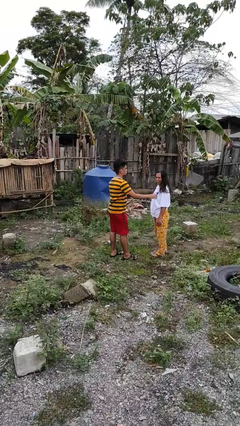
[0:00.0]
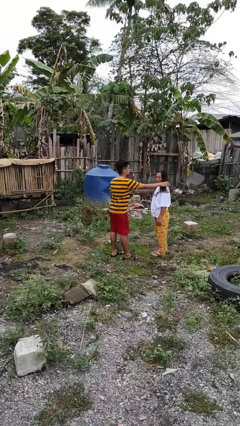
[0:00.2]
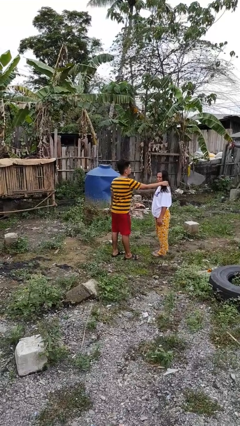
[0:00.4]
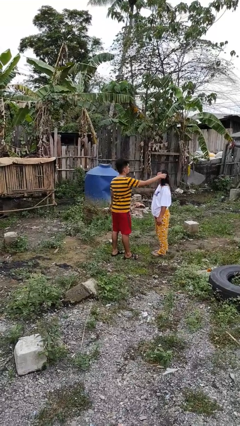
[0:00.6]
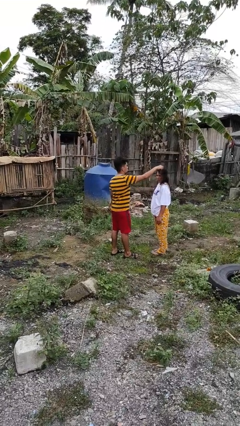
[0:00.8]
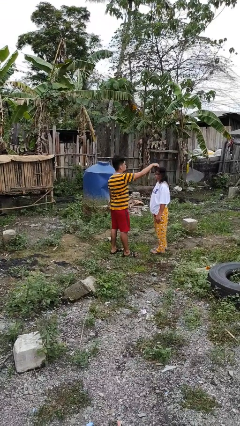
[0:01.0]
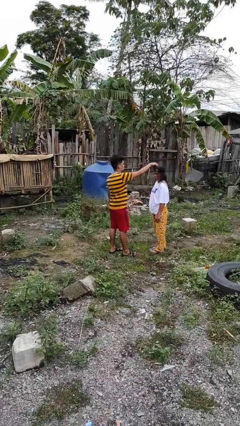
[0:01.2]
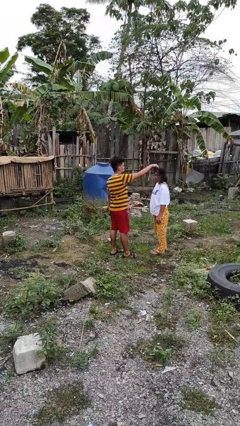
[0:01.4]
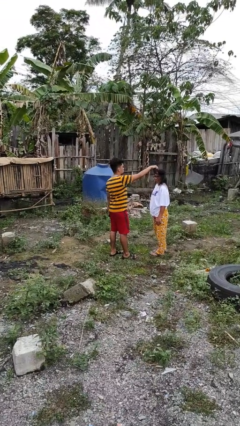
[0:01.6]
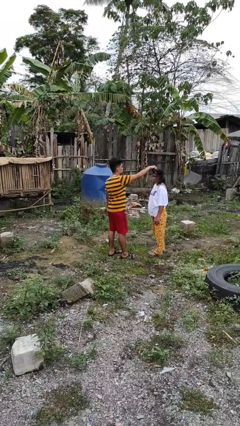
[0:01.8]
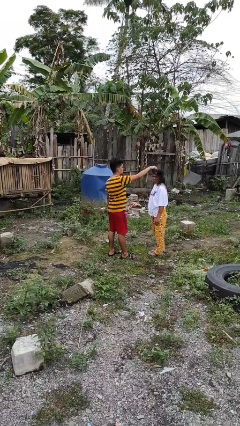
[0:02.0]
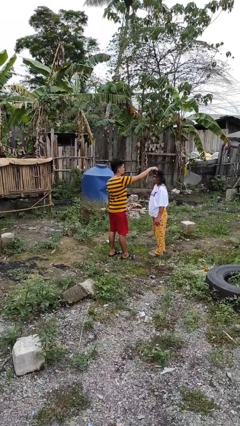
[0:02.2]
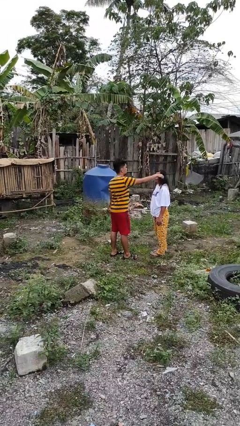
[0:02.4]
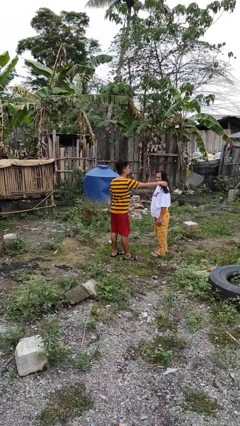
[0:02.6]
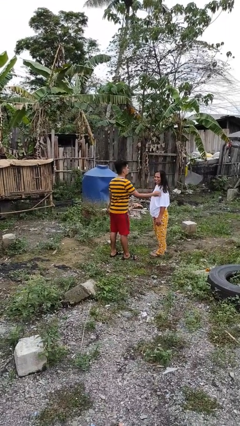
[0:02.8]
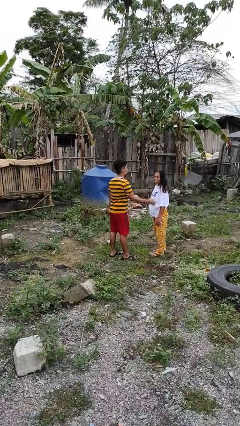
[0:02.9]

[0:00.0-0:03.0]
person grabs person by hair

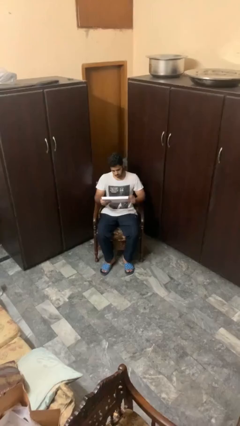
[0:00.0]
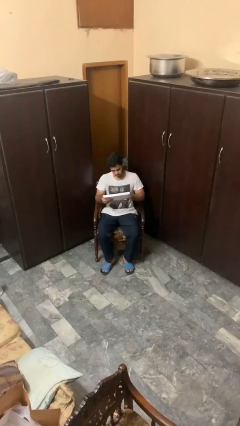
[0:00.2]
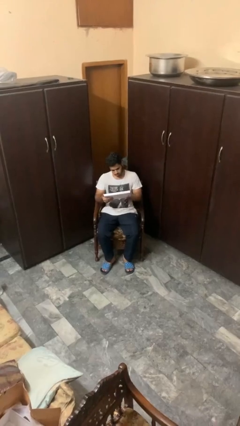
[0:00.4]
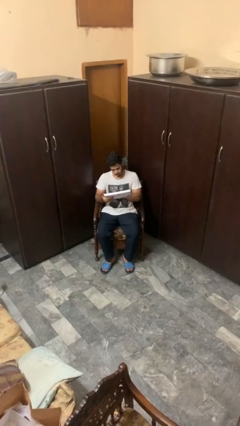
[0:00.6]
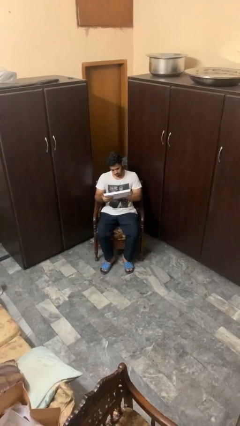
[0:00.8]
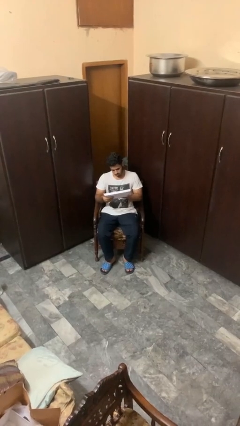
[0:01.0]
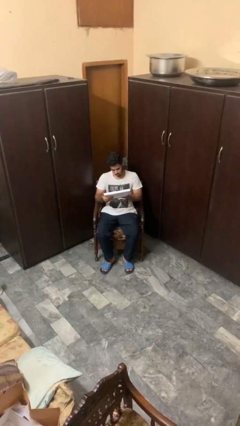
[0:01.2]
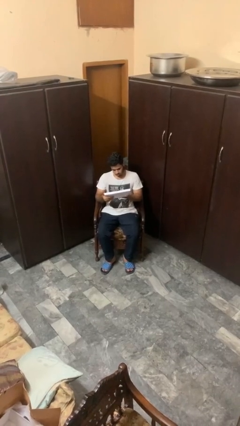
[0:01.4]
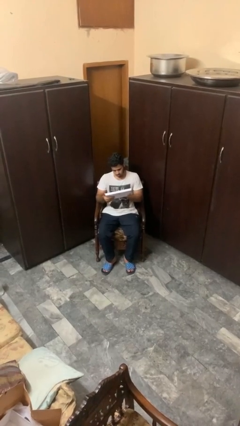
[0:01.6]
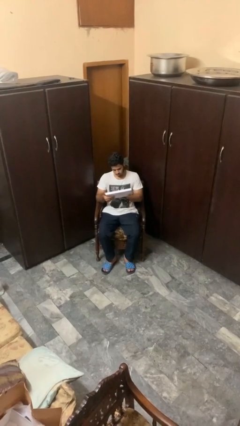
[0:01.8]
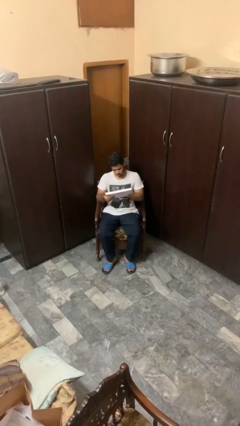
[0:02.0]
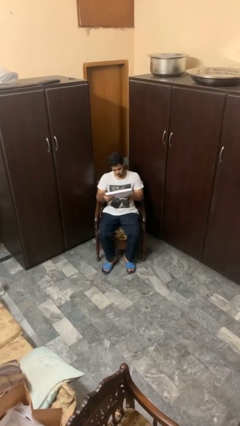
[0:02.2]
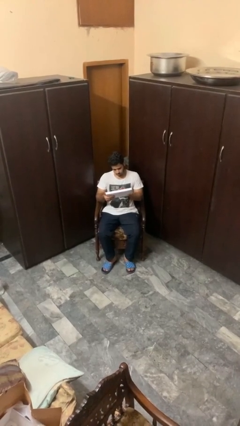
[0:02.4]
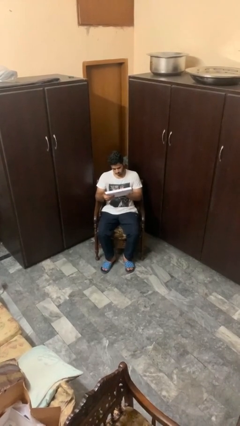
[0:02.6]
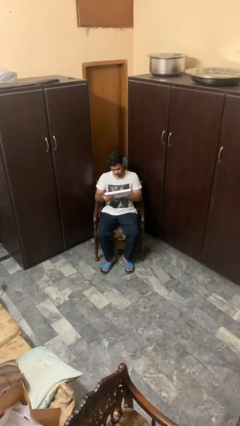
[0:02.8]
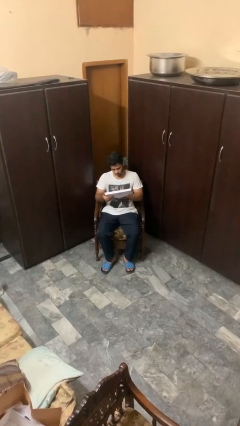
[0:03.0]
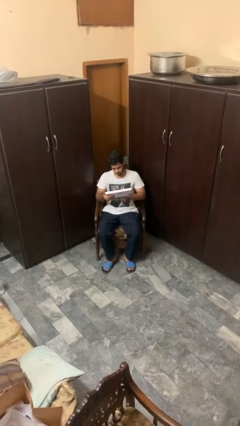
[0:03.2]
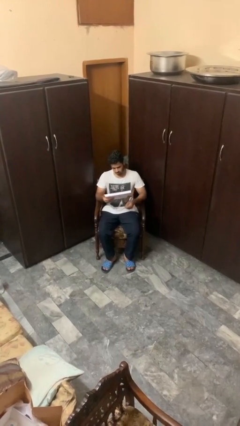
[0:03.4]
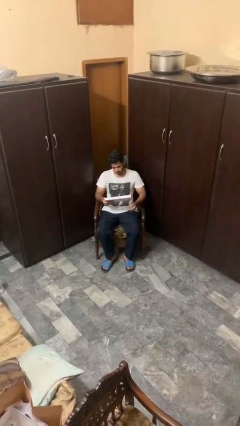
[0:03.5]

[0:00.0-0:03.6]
person interacts with tablet

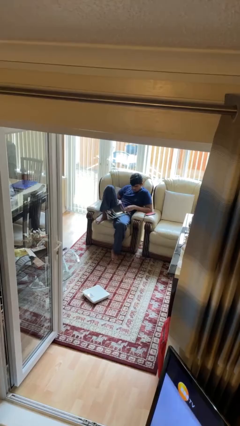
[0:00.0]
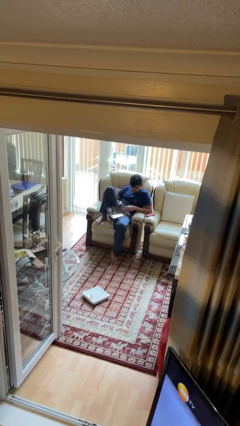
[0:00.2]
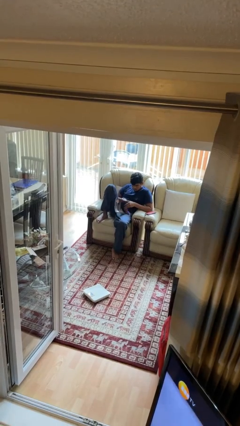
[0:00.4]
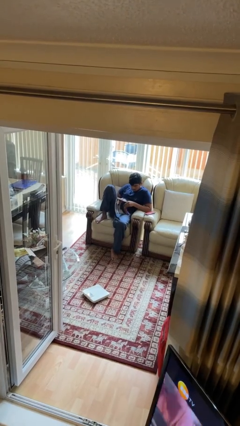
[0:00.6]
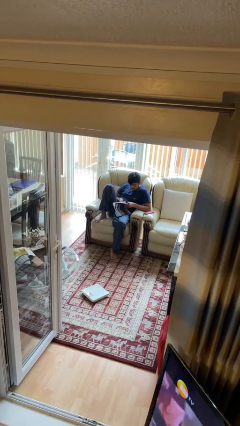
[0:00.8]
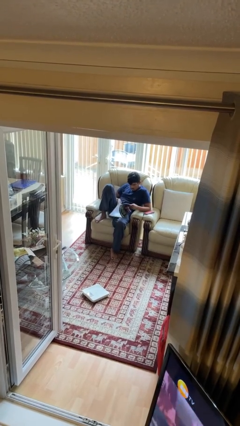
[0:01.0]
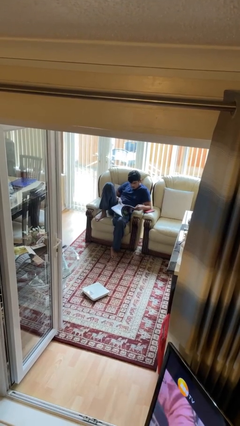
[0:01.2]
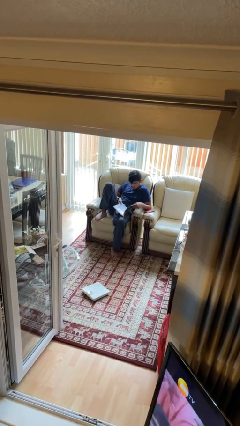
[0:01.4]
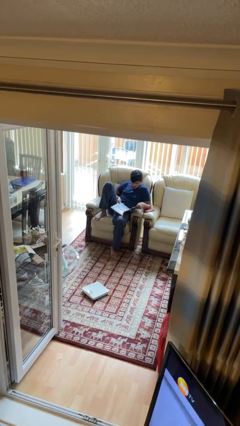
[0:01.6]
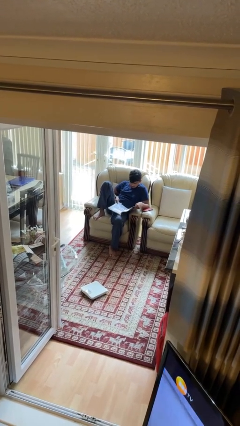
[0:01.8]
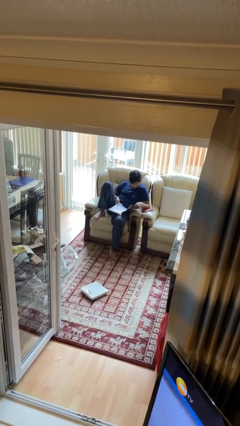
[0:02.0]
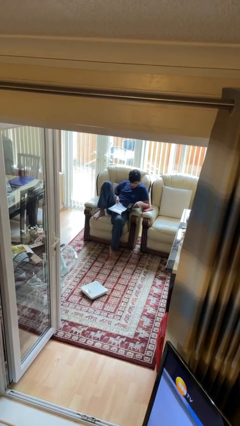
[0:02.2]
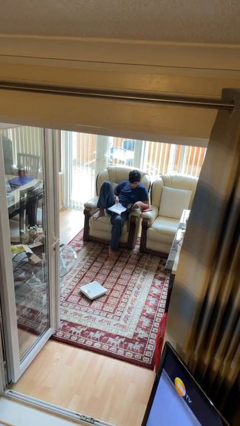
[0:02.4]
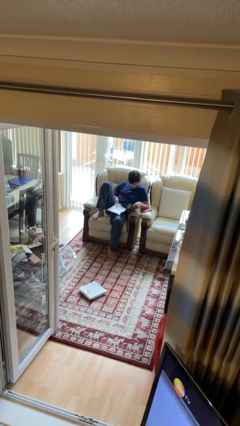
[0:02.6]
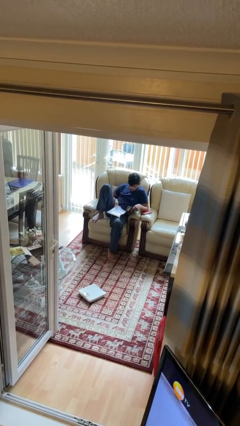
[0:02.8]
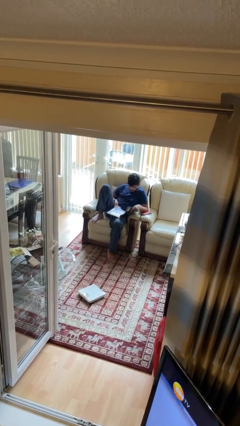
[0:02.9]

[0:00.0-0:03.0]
person reads magazine

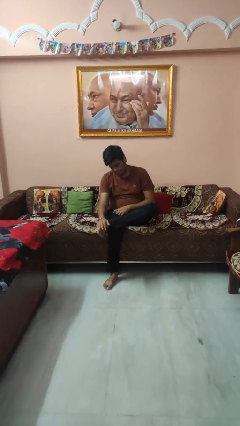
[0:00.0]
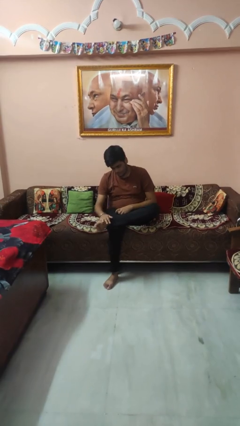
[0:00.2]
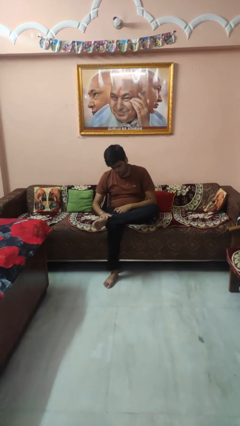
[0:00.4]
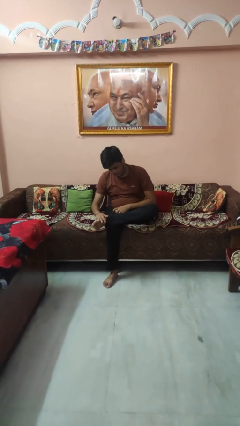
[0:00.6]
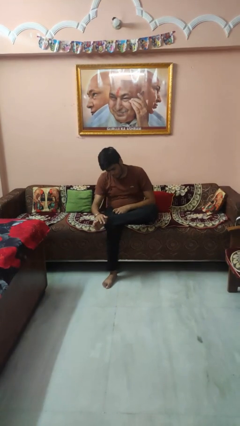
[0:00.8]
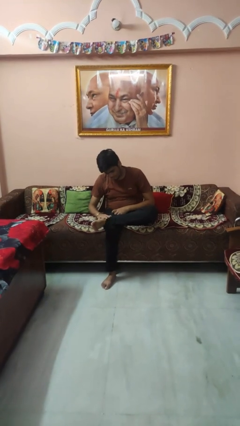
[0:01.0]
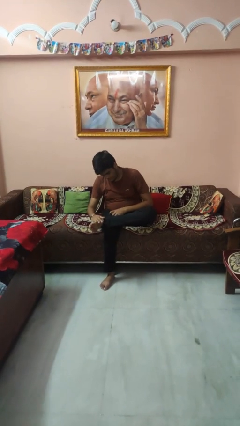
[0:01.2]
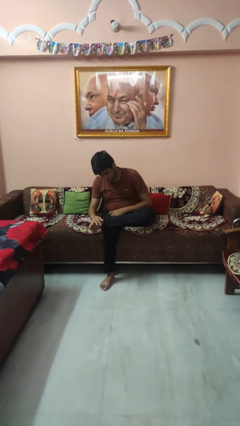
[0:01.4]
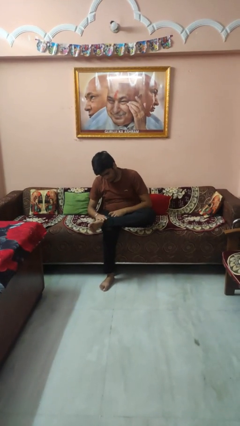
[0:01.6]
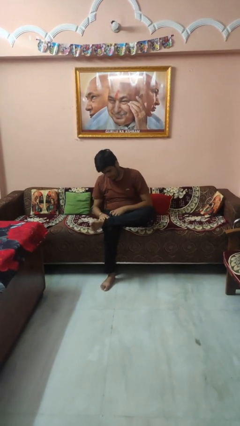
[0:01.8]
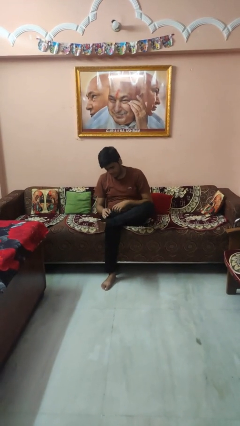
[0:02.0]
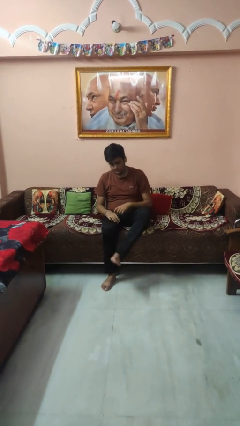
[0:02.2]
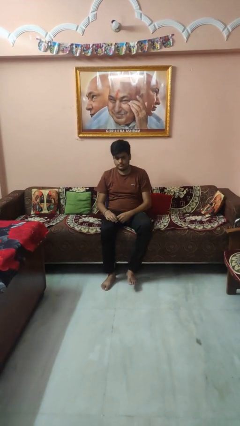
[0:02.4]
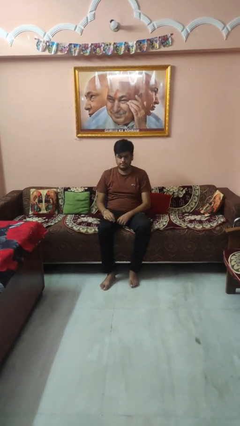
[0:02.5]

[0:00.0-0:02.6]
person rubs foot

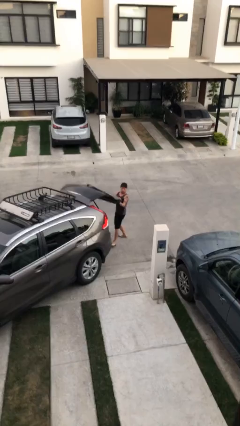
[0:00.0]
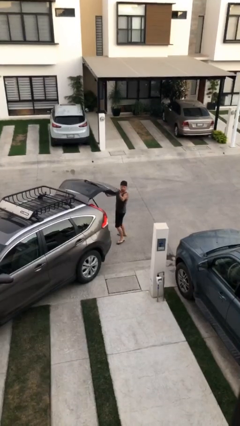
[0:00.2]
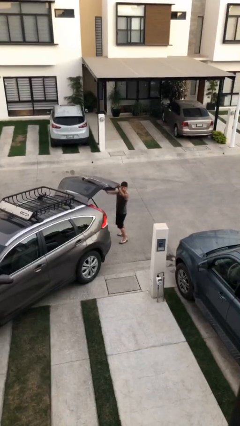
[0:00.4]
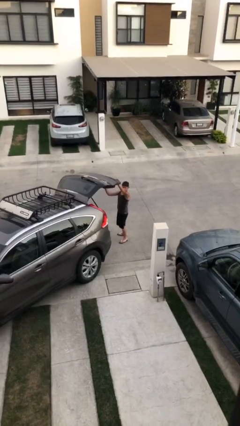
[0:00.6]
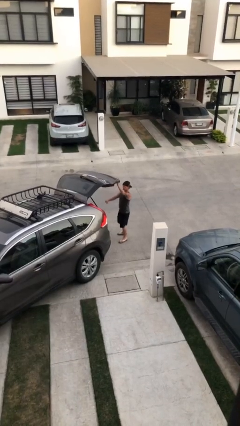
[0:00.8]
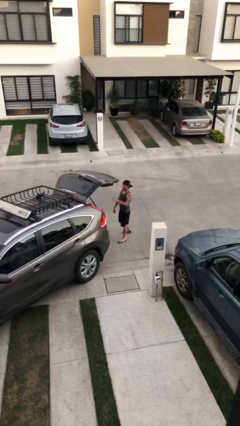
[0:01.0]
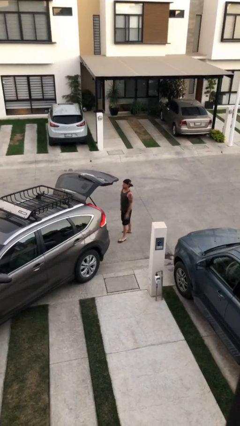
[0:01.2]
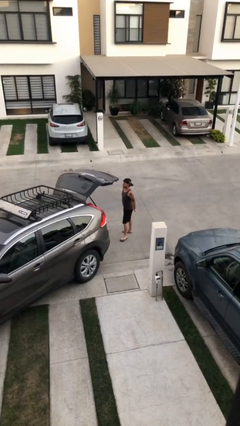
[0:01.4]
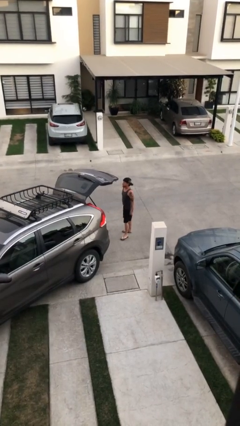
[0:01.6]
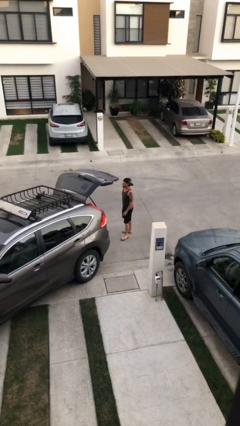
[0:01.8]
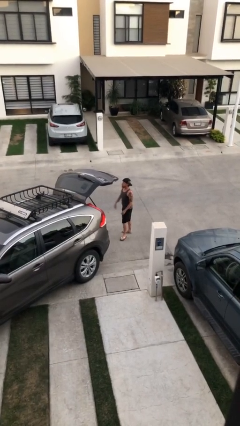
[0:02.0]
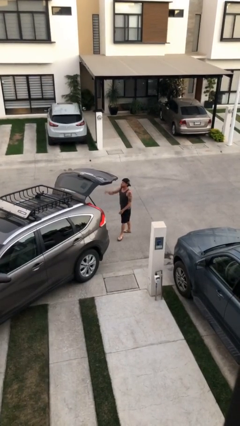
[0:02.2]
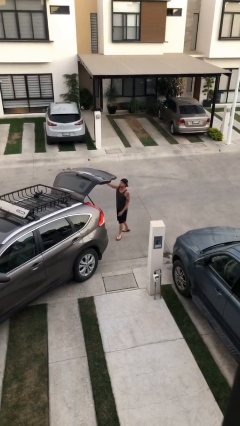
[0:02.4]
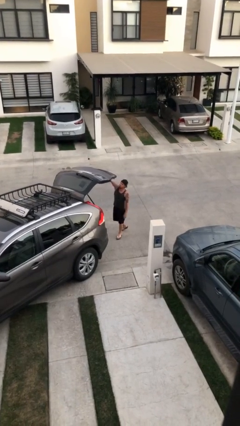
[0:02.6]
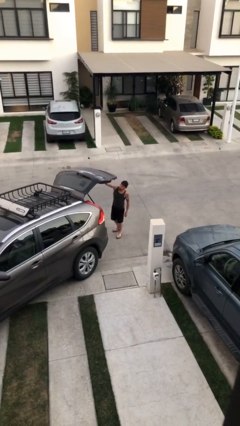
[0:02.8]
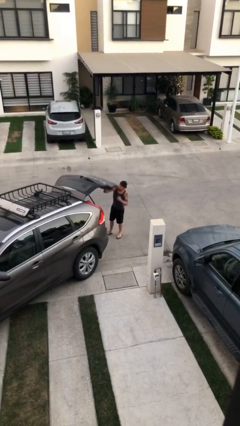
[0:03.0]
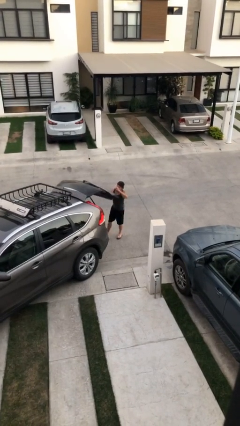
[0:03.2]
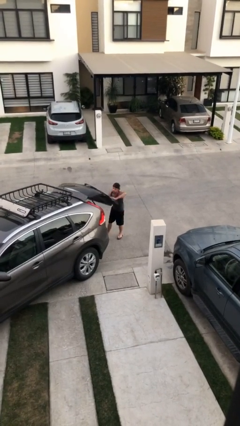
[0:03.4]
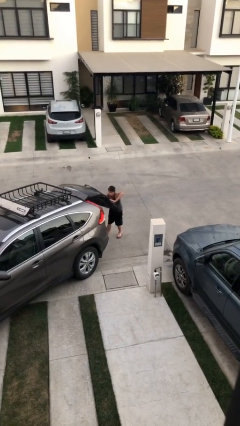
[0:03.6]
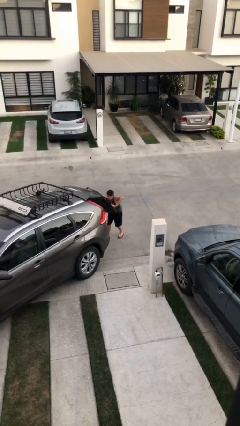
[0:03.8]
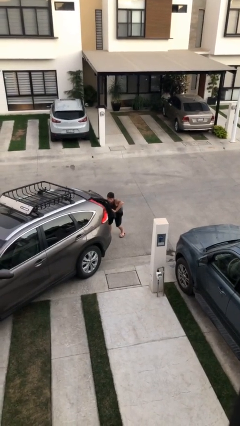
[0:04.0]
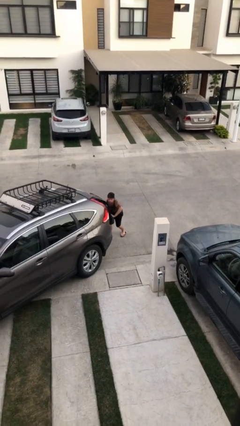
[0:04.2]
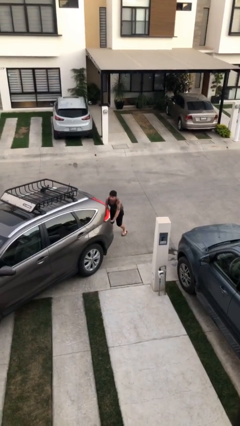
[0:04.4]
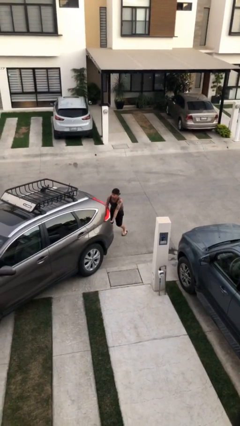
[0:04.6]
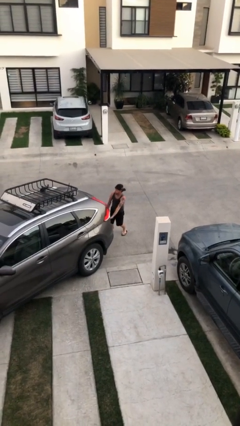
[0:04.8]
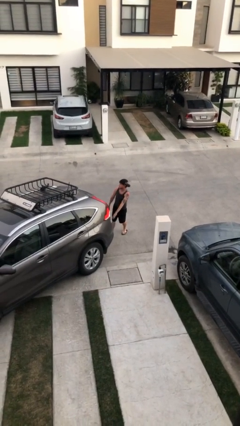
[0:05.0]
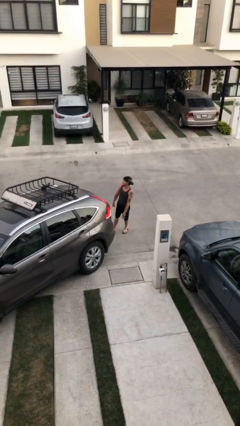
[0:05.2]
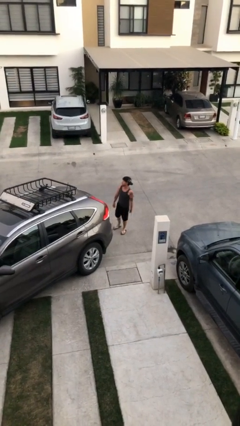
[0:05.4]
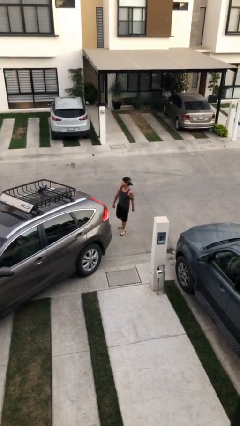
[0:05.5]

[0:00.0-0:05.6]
person closes car trunk
